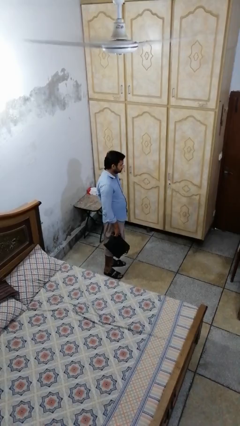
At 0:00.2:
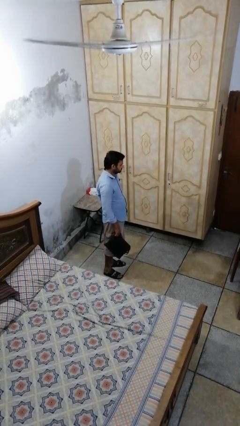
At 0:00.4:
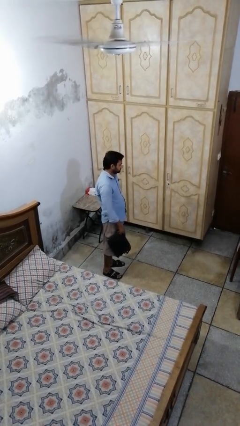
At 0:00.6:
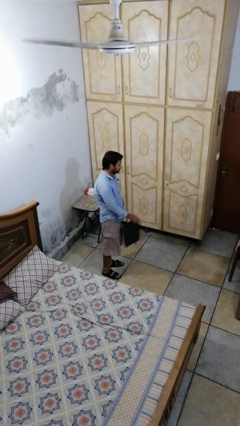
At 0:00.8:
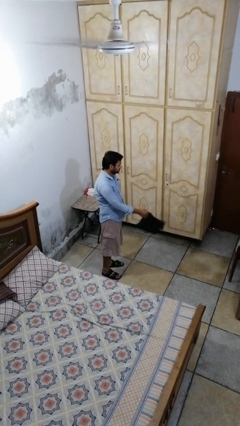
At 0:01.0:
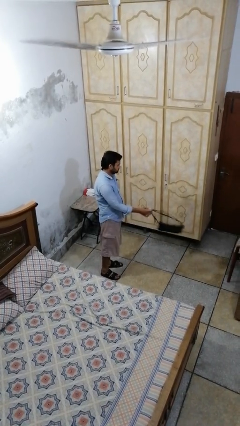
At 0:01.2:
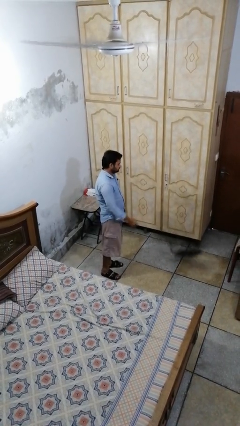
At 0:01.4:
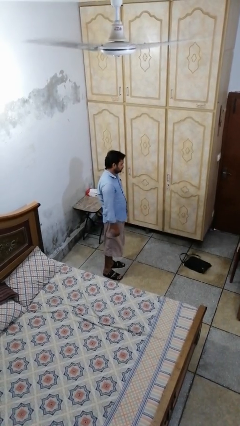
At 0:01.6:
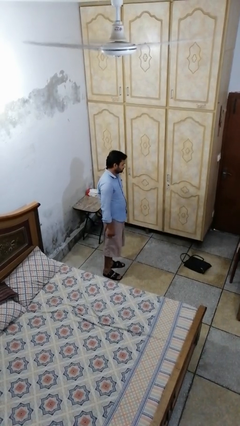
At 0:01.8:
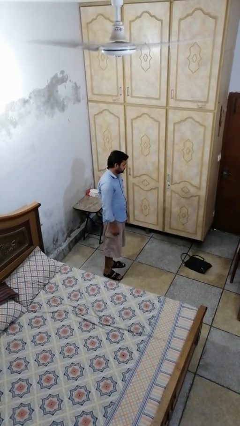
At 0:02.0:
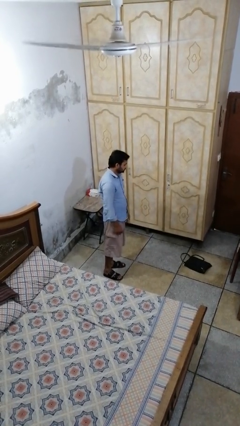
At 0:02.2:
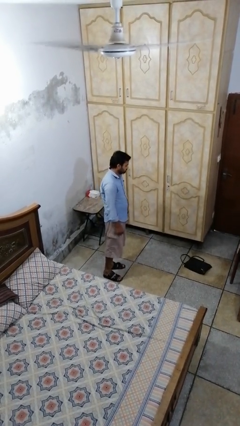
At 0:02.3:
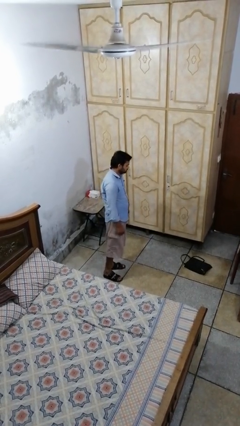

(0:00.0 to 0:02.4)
person throws object to ground

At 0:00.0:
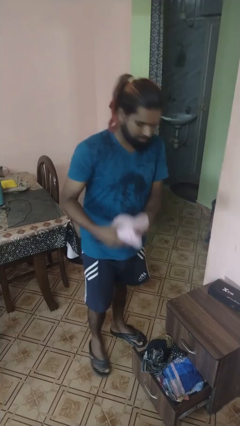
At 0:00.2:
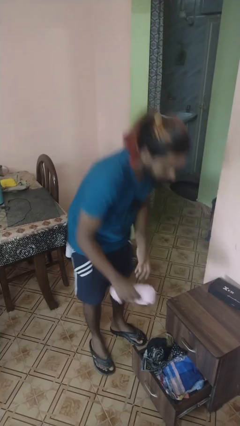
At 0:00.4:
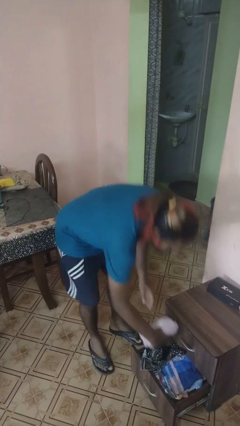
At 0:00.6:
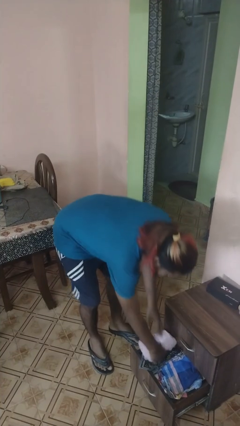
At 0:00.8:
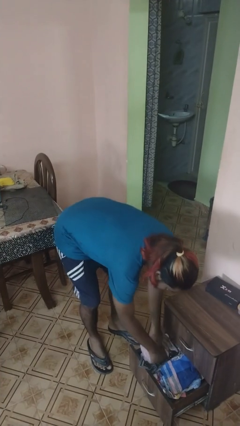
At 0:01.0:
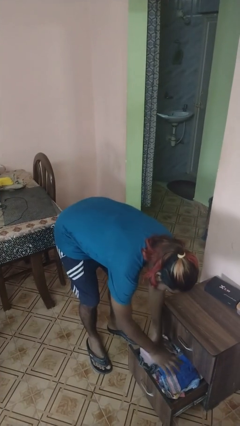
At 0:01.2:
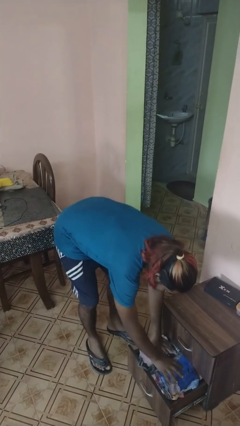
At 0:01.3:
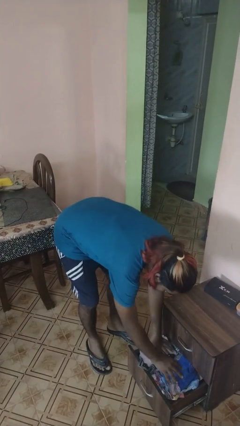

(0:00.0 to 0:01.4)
person puts clothes into dresser

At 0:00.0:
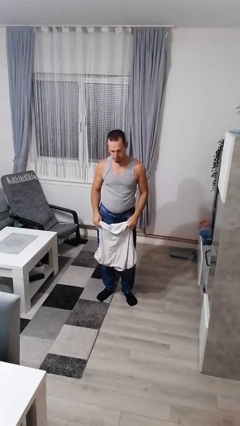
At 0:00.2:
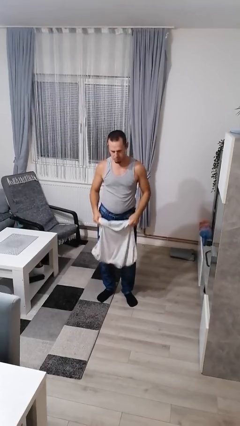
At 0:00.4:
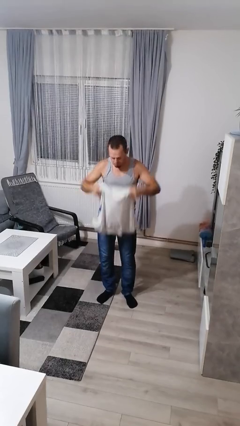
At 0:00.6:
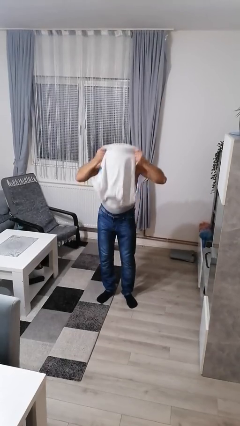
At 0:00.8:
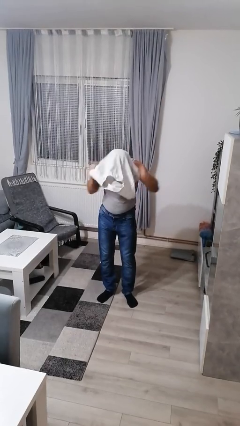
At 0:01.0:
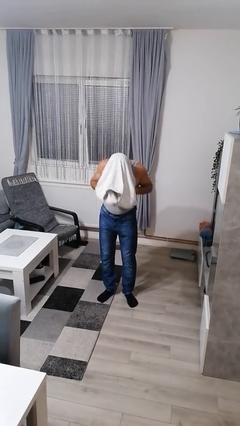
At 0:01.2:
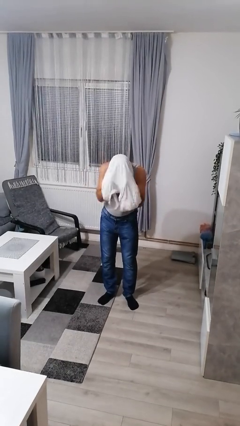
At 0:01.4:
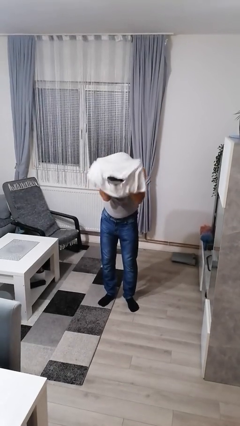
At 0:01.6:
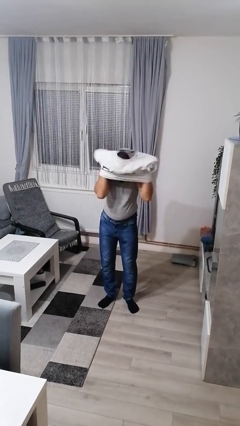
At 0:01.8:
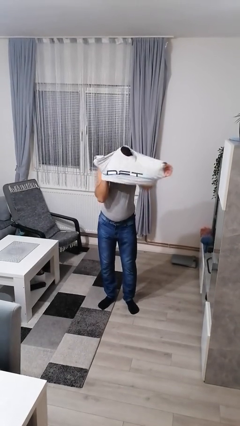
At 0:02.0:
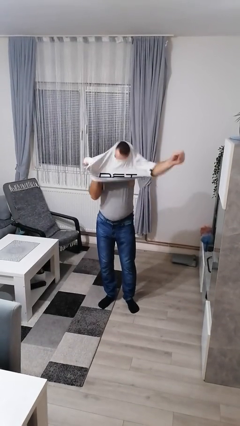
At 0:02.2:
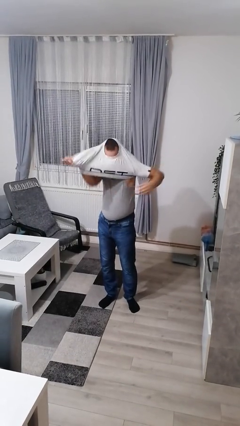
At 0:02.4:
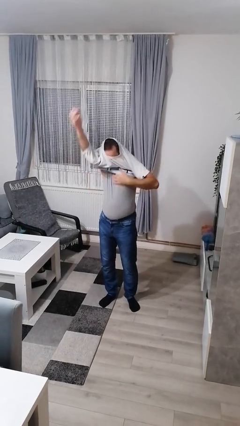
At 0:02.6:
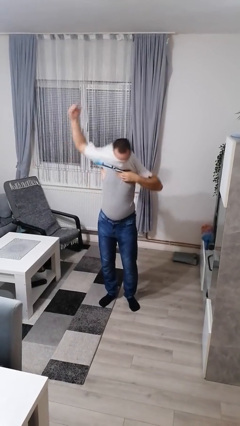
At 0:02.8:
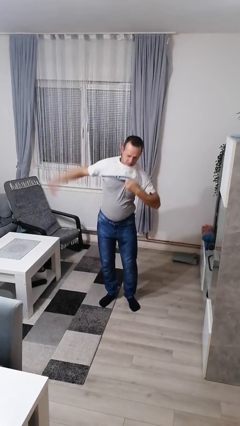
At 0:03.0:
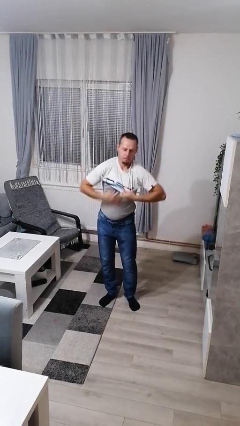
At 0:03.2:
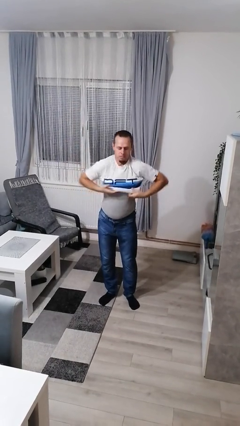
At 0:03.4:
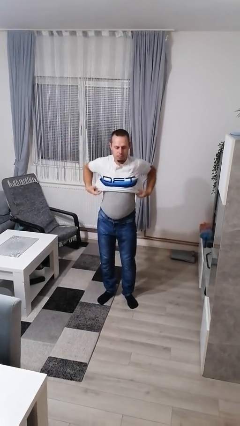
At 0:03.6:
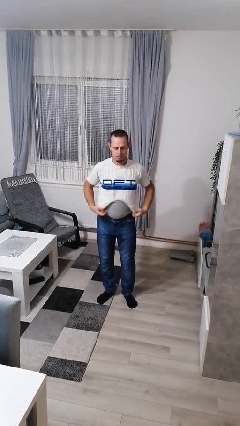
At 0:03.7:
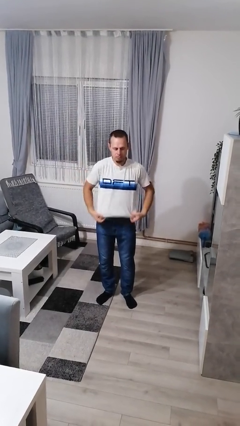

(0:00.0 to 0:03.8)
person puts on shirt

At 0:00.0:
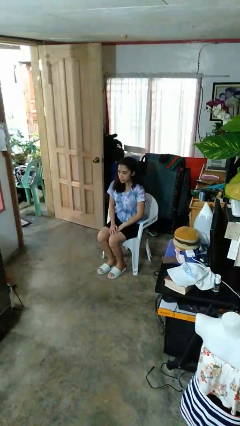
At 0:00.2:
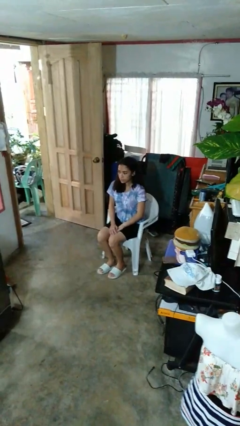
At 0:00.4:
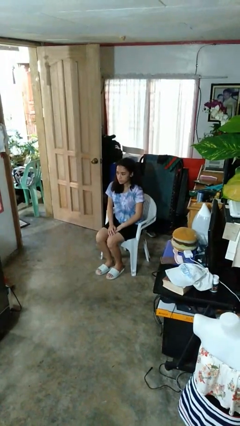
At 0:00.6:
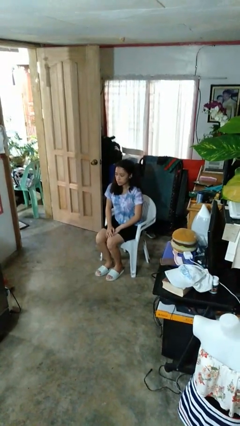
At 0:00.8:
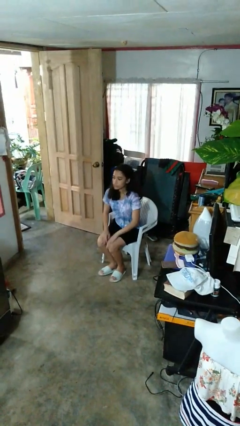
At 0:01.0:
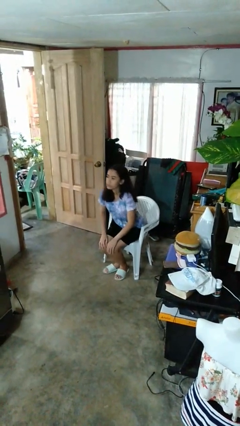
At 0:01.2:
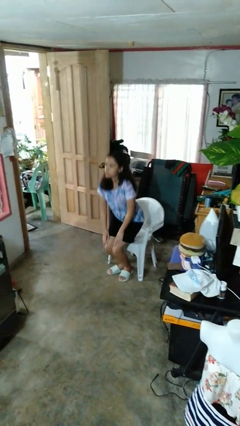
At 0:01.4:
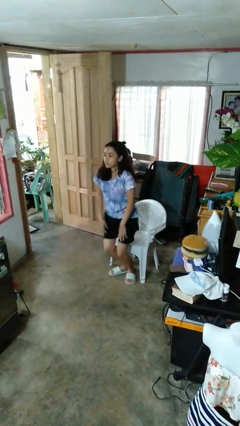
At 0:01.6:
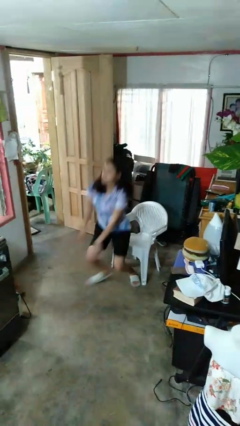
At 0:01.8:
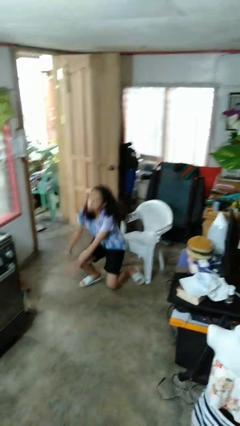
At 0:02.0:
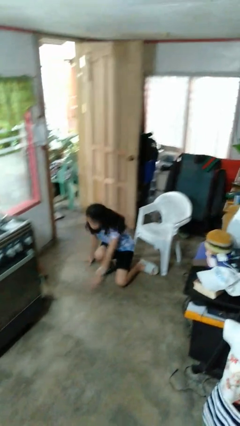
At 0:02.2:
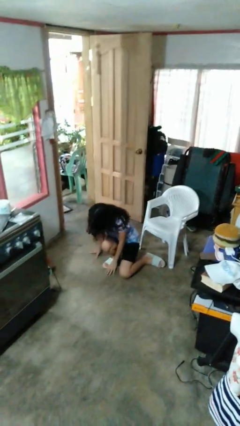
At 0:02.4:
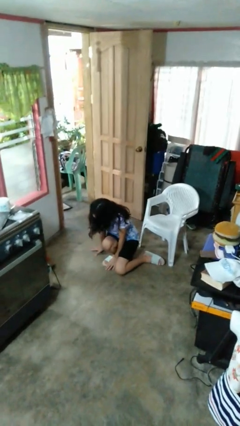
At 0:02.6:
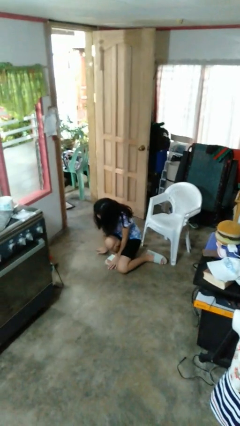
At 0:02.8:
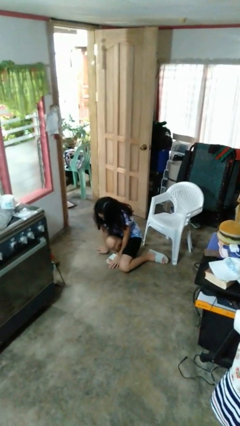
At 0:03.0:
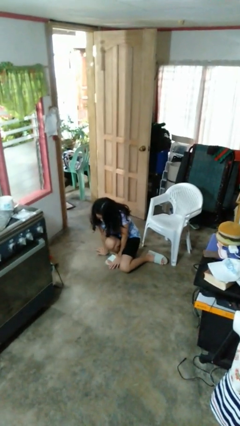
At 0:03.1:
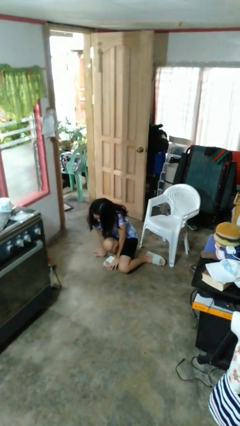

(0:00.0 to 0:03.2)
person falls from chair

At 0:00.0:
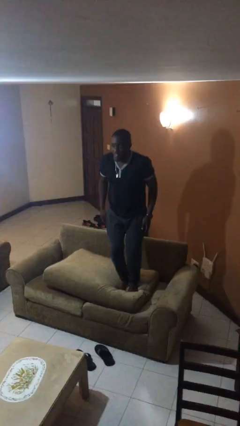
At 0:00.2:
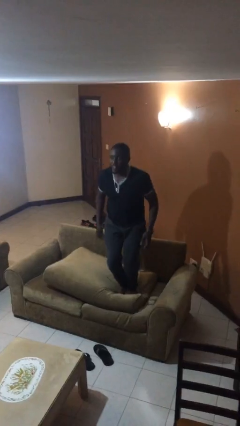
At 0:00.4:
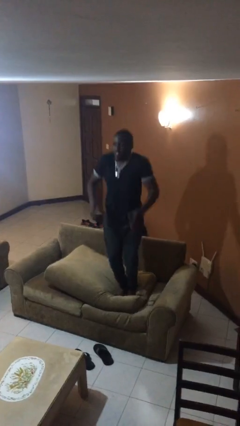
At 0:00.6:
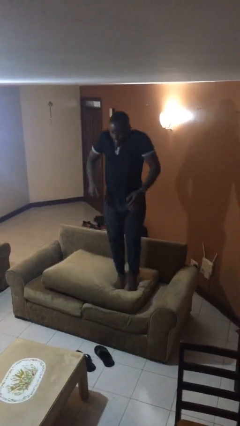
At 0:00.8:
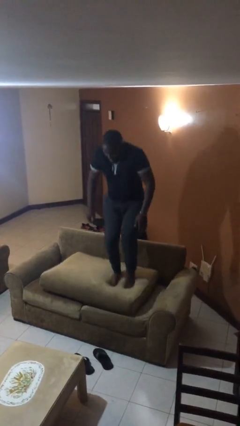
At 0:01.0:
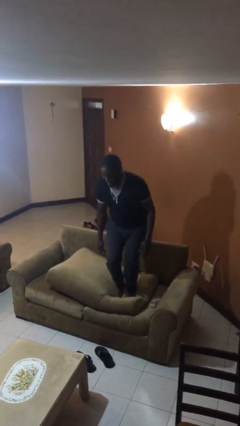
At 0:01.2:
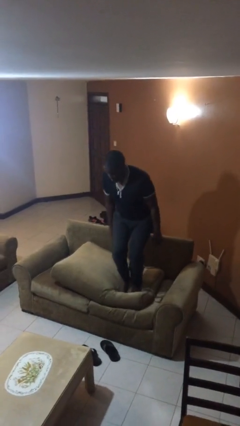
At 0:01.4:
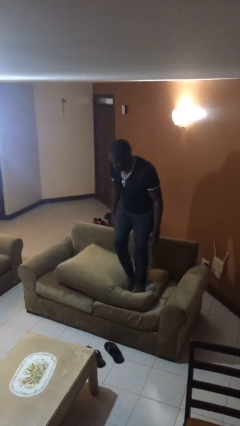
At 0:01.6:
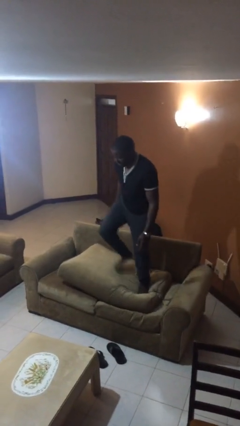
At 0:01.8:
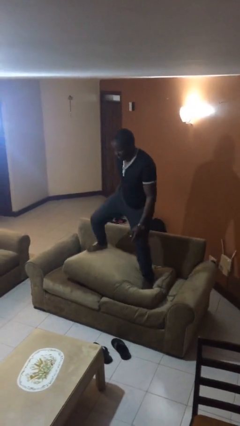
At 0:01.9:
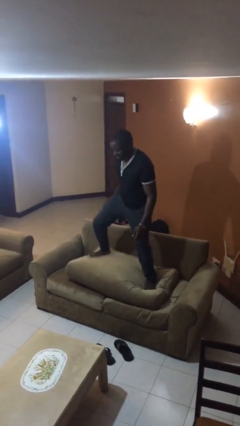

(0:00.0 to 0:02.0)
person jumps on couch

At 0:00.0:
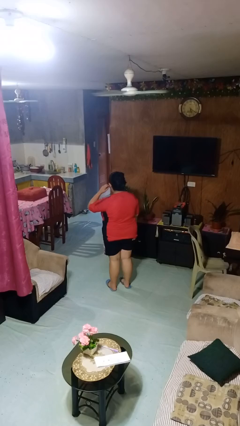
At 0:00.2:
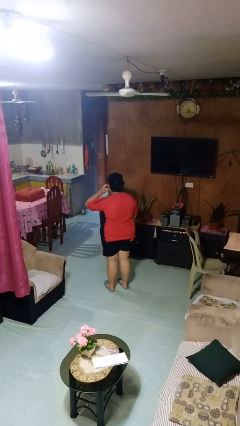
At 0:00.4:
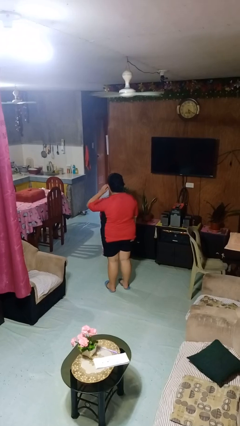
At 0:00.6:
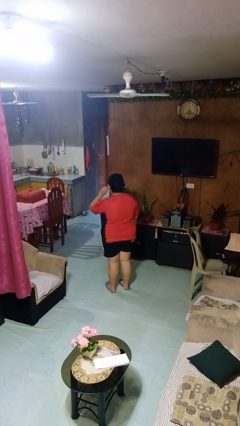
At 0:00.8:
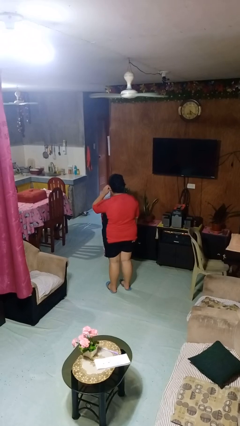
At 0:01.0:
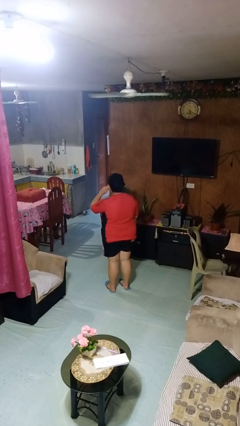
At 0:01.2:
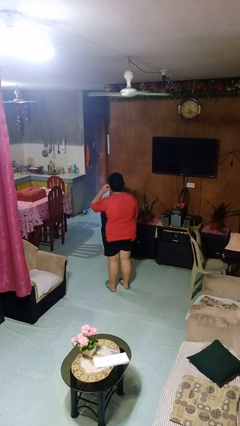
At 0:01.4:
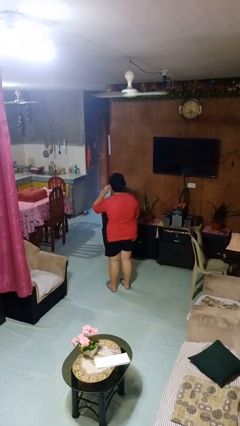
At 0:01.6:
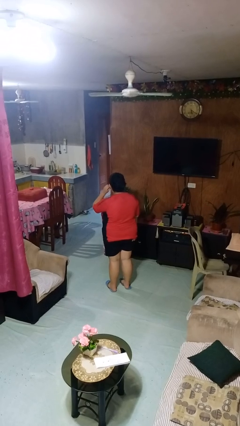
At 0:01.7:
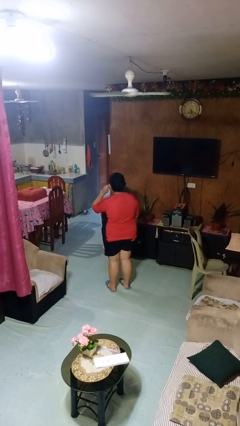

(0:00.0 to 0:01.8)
person touches earlobe

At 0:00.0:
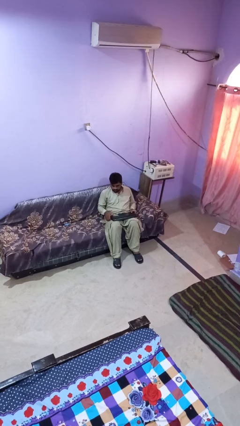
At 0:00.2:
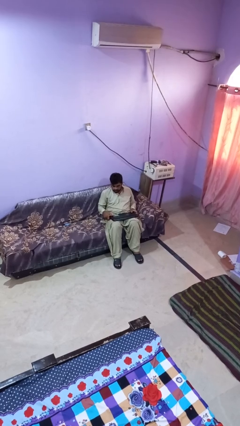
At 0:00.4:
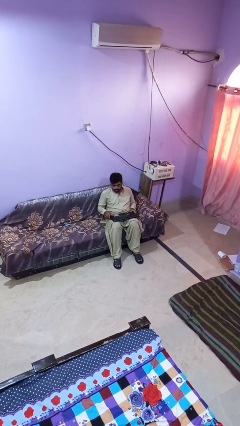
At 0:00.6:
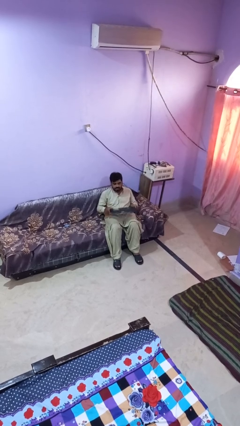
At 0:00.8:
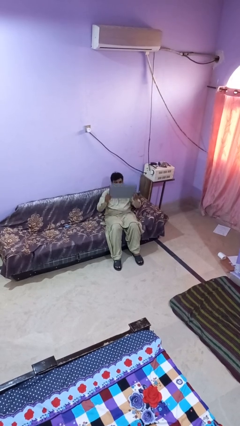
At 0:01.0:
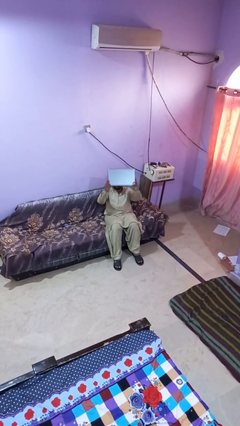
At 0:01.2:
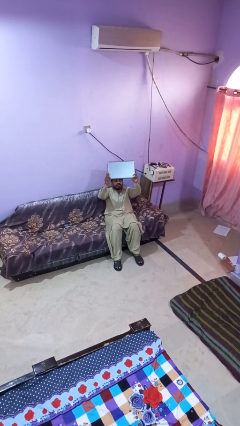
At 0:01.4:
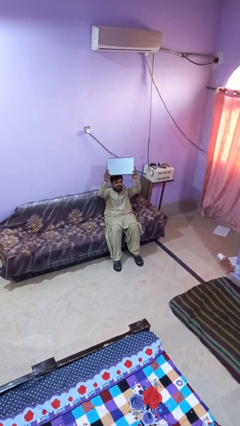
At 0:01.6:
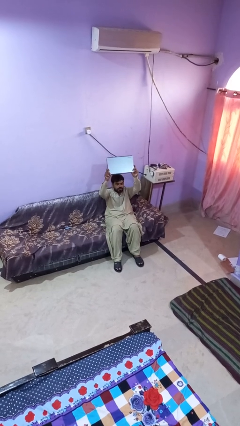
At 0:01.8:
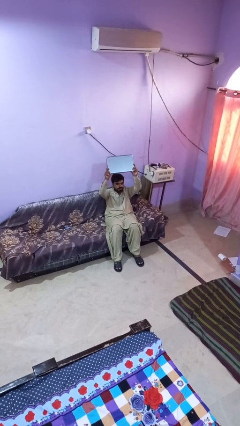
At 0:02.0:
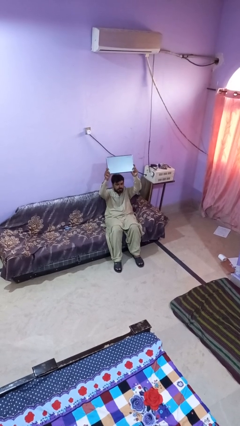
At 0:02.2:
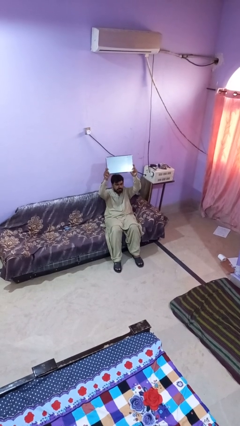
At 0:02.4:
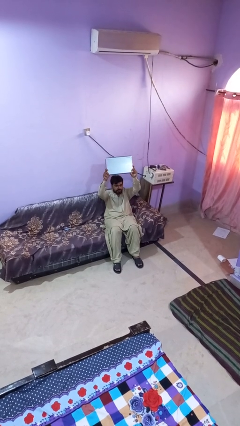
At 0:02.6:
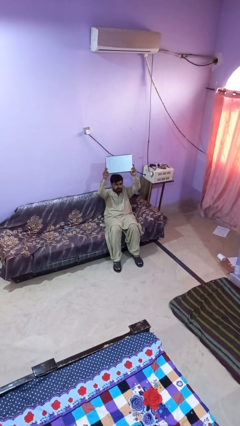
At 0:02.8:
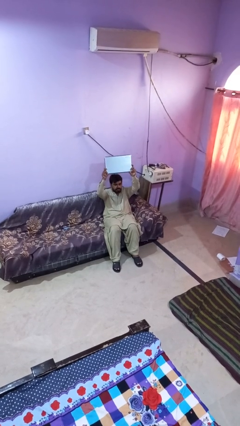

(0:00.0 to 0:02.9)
person holds object above head
